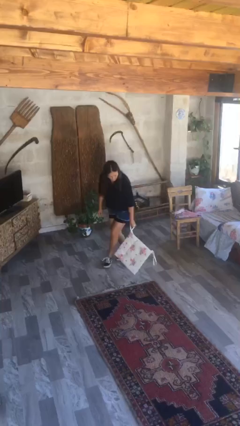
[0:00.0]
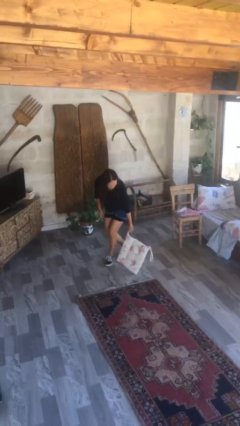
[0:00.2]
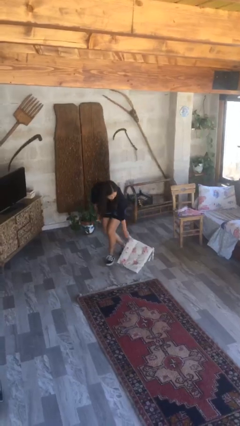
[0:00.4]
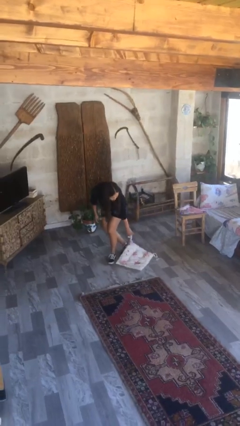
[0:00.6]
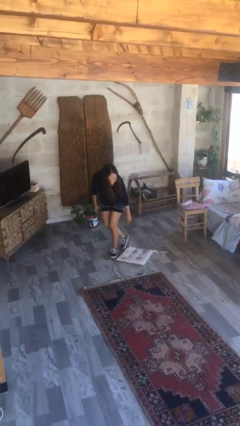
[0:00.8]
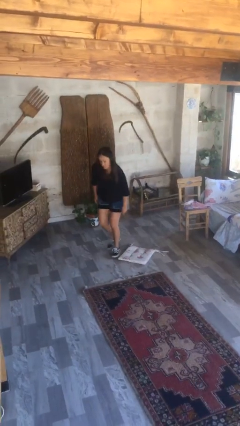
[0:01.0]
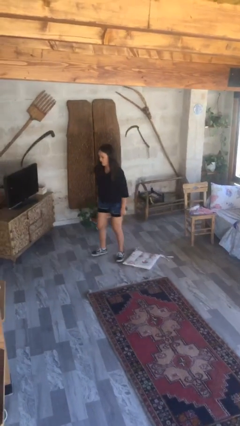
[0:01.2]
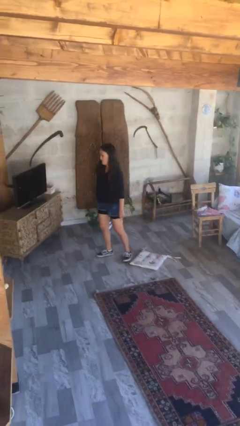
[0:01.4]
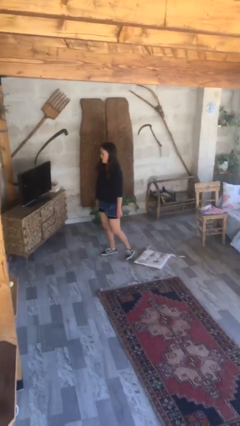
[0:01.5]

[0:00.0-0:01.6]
person puts down object on floor

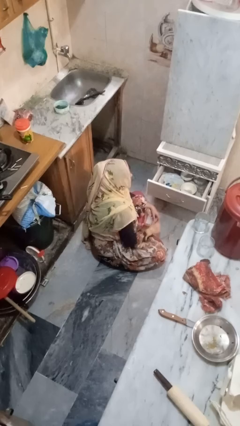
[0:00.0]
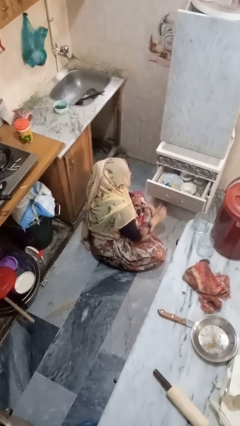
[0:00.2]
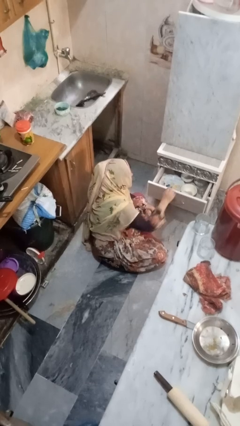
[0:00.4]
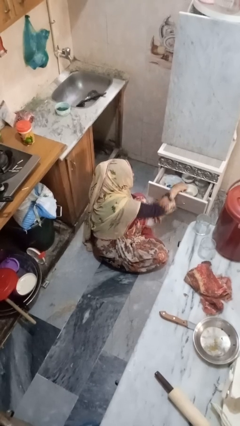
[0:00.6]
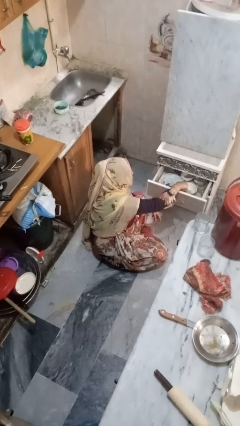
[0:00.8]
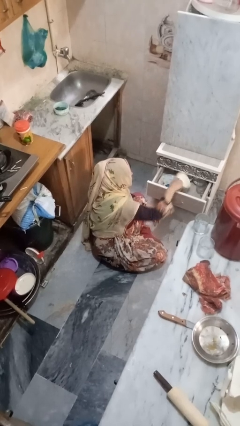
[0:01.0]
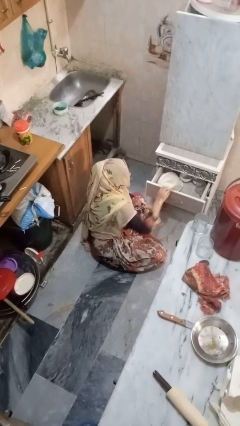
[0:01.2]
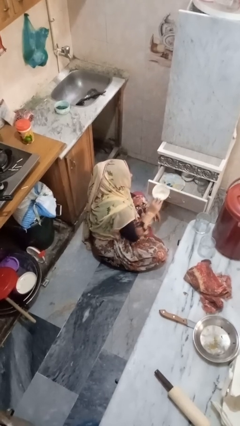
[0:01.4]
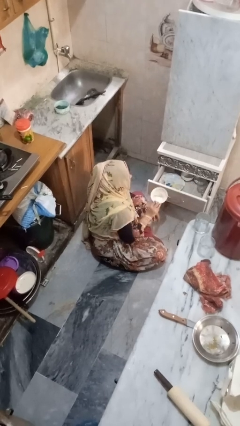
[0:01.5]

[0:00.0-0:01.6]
person takes object from kitchen drawer

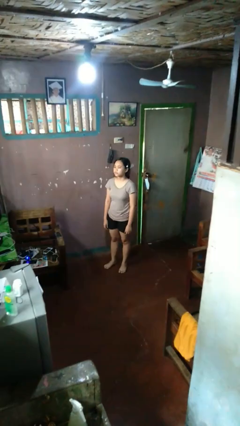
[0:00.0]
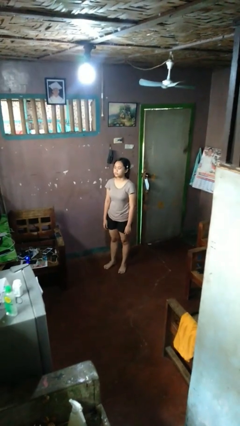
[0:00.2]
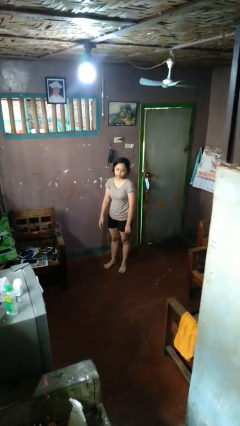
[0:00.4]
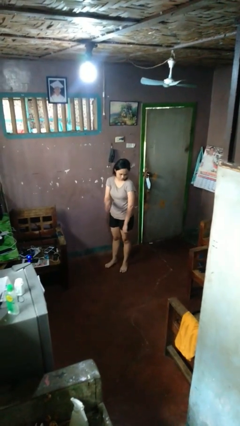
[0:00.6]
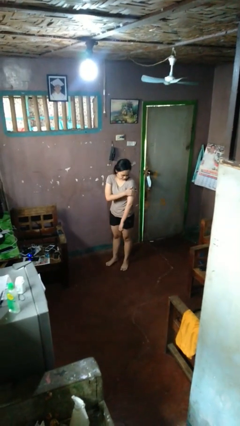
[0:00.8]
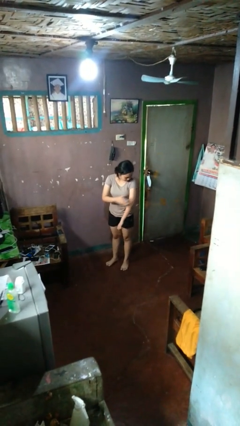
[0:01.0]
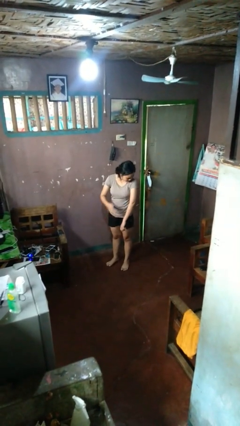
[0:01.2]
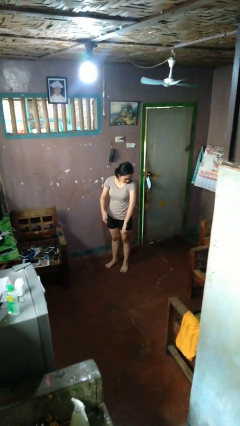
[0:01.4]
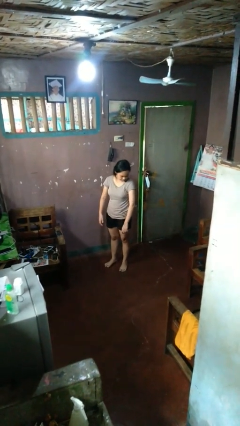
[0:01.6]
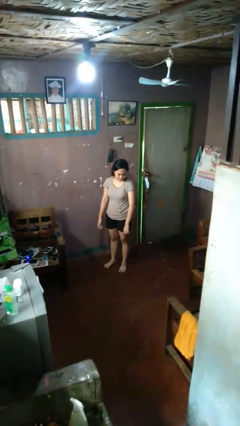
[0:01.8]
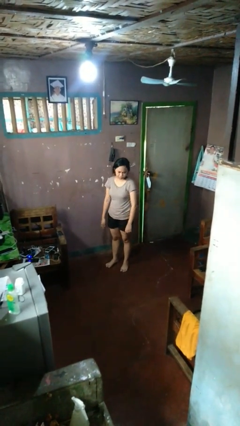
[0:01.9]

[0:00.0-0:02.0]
person swats bug

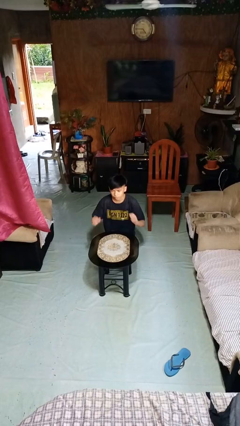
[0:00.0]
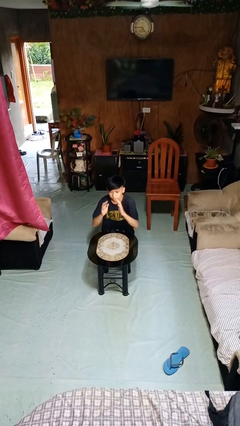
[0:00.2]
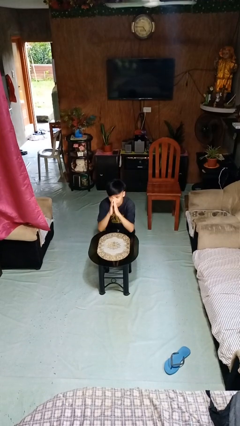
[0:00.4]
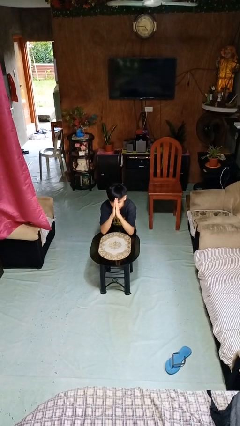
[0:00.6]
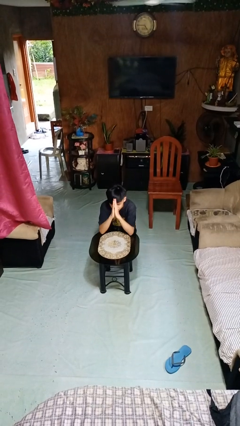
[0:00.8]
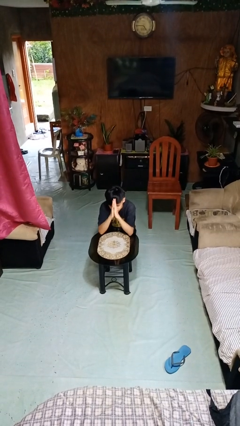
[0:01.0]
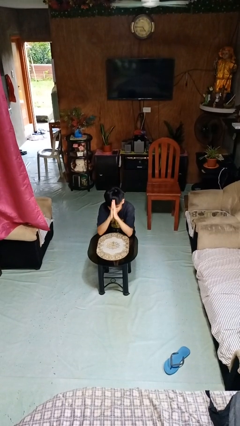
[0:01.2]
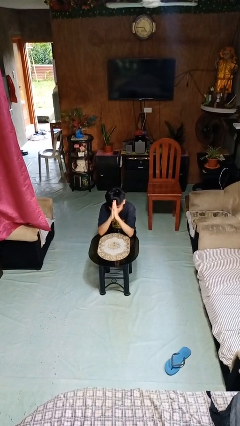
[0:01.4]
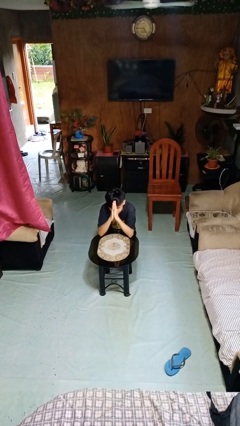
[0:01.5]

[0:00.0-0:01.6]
person prays

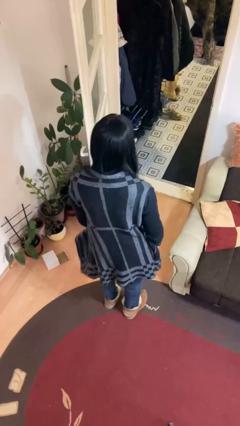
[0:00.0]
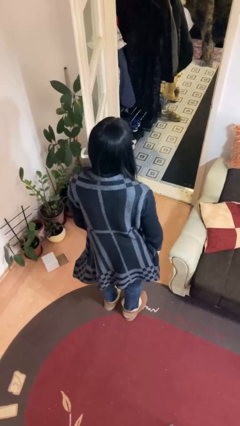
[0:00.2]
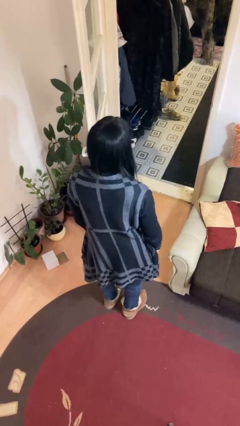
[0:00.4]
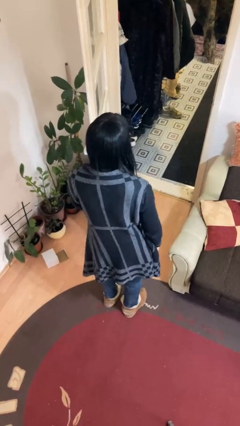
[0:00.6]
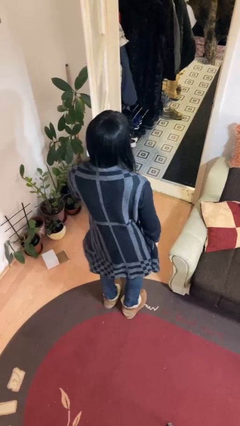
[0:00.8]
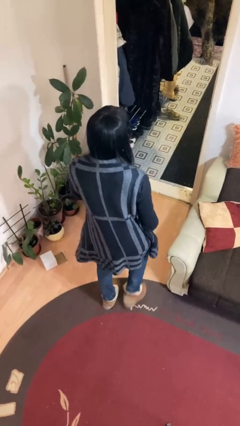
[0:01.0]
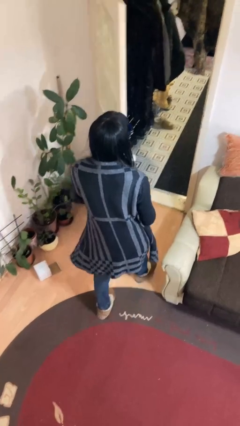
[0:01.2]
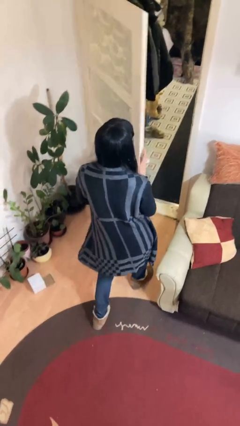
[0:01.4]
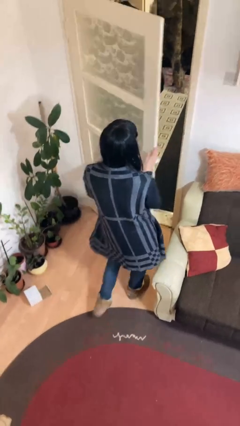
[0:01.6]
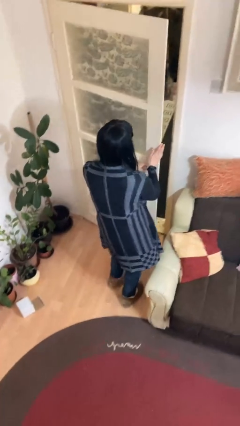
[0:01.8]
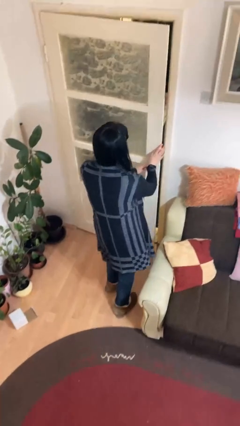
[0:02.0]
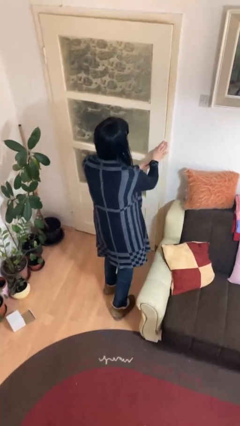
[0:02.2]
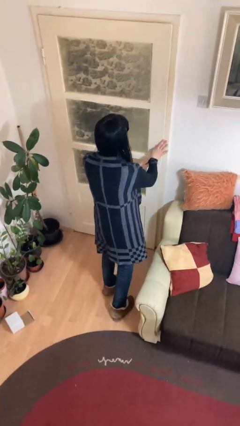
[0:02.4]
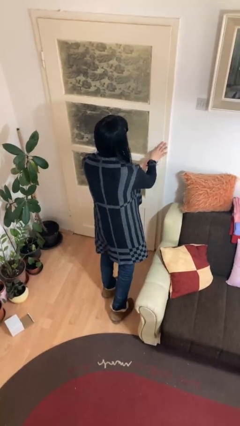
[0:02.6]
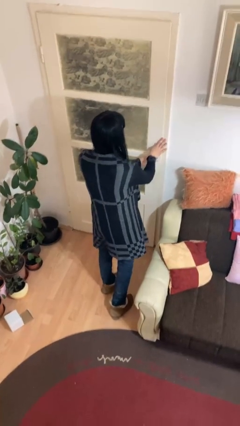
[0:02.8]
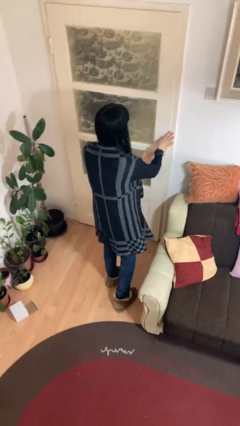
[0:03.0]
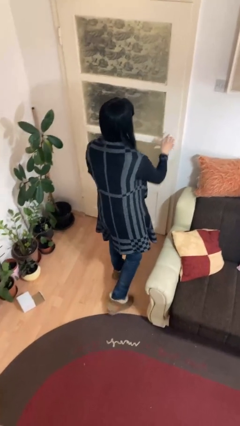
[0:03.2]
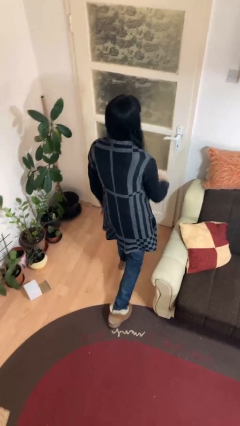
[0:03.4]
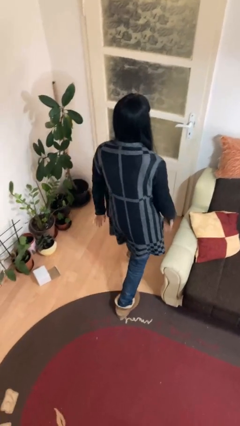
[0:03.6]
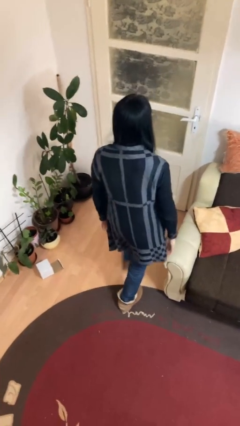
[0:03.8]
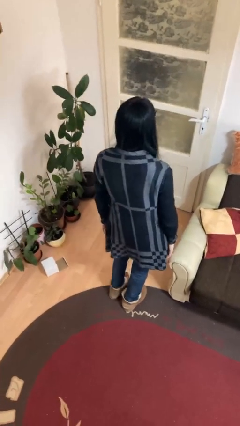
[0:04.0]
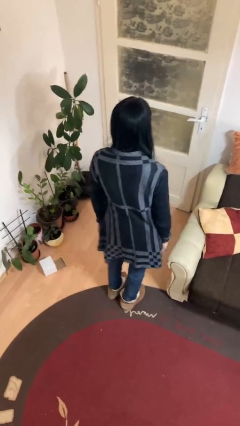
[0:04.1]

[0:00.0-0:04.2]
person closes facility door

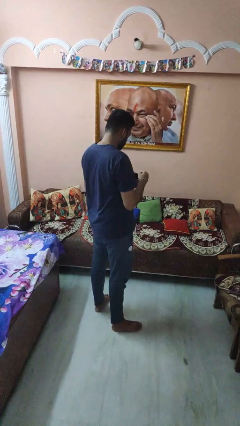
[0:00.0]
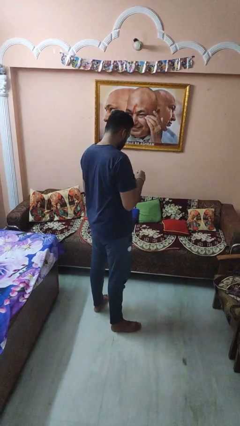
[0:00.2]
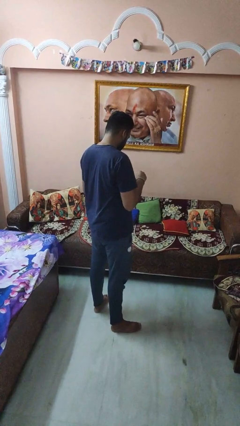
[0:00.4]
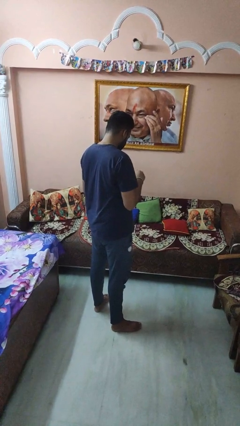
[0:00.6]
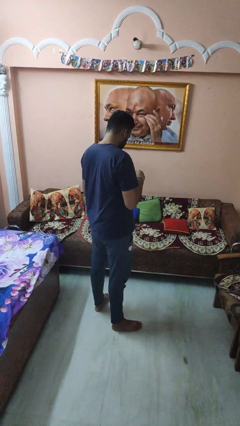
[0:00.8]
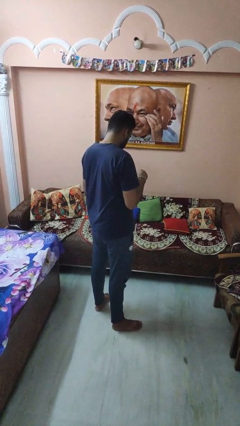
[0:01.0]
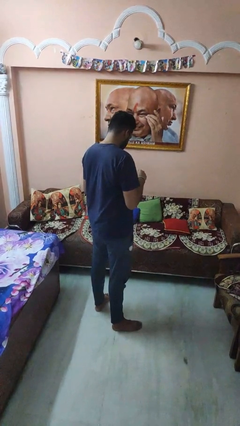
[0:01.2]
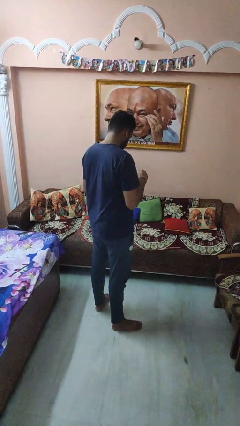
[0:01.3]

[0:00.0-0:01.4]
person stirs mug

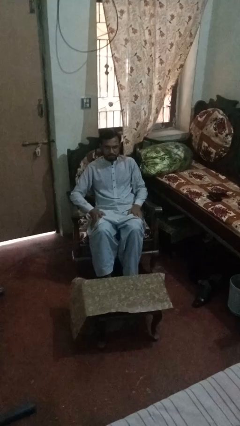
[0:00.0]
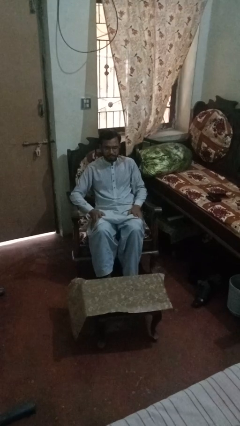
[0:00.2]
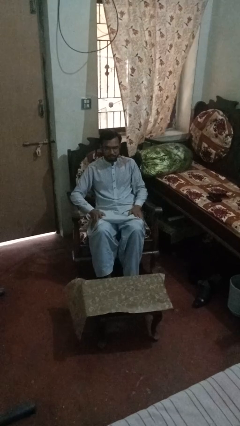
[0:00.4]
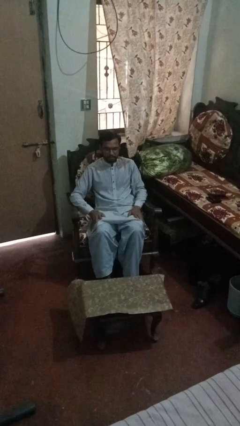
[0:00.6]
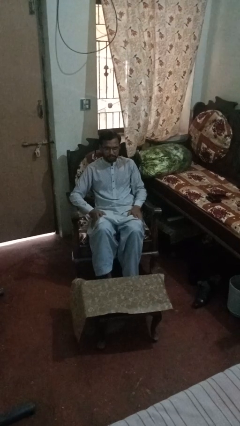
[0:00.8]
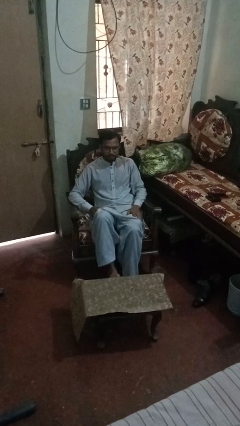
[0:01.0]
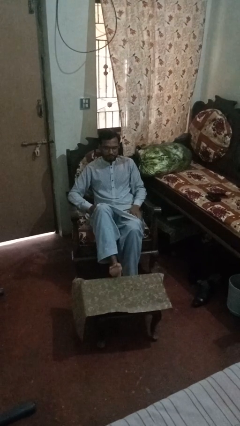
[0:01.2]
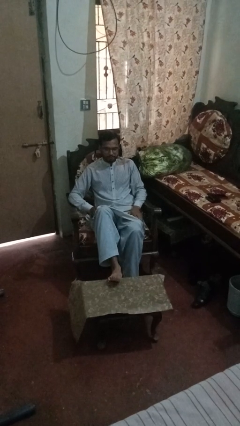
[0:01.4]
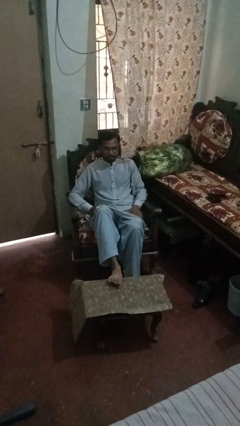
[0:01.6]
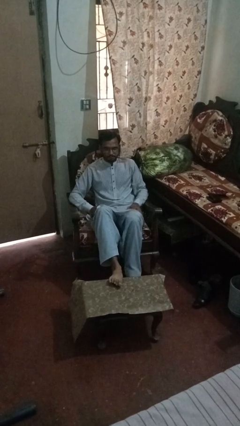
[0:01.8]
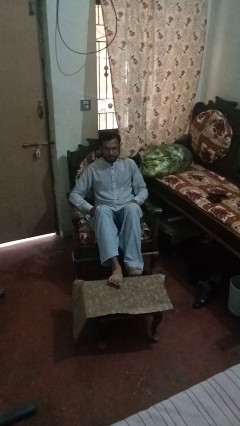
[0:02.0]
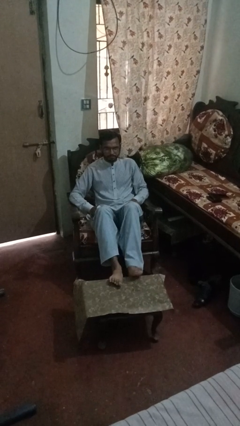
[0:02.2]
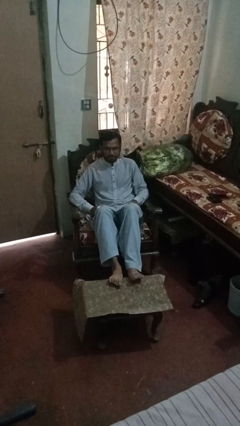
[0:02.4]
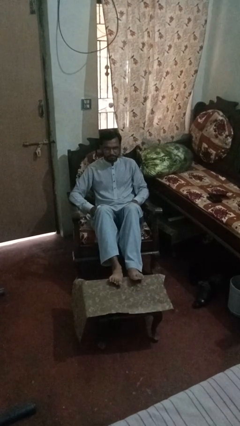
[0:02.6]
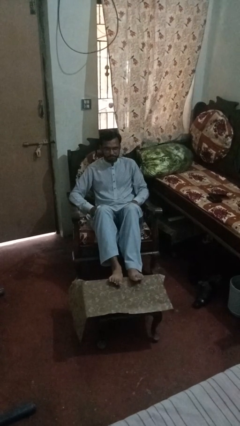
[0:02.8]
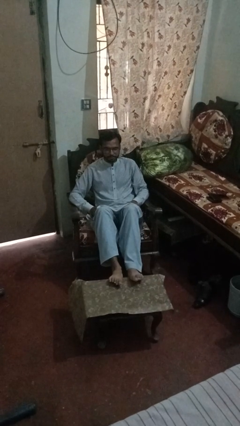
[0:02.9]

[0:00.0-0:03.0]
person puts feet up

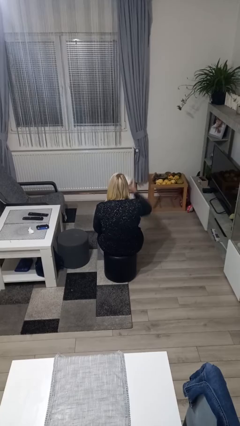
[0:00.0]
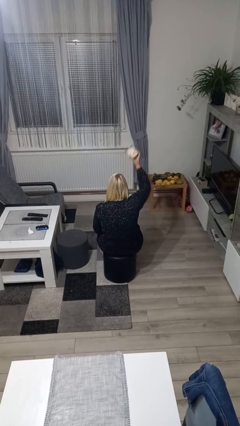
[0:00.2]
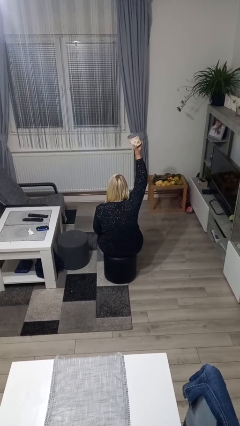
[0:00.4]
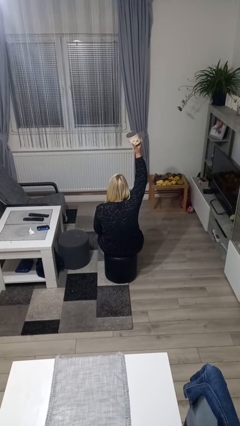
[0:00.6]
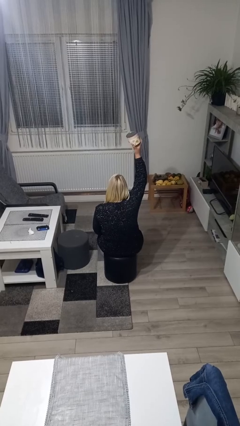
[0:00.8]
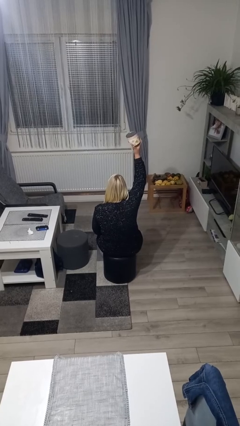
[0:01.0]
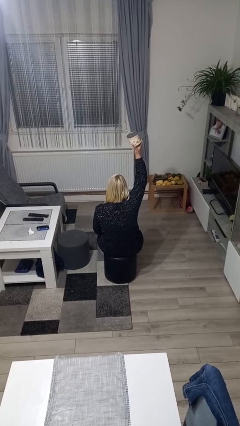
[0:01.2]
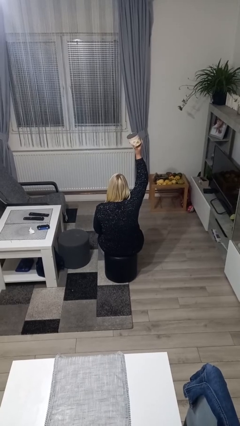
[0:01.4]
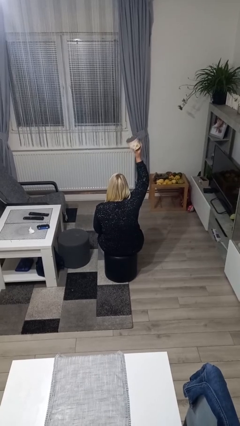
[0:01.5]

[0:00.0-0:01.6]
person holds object above head
